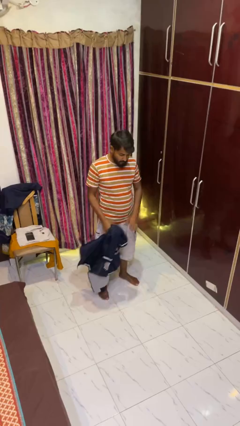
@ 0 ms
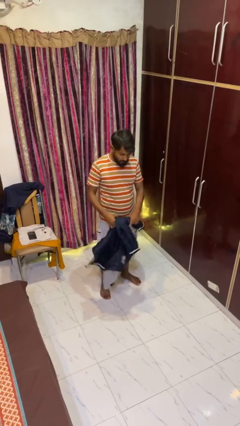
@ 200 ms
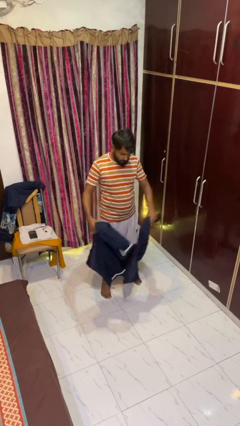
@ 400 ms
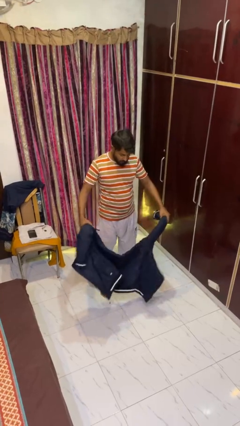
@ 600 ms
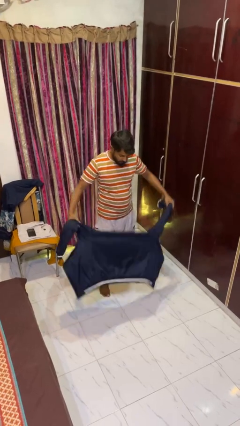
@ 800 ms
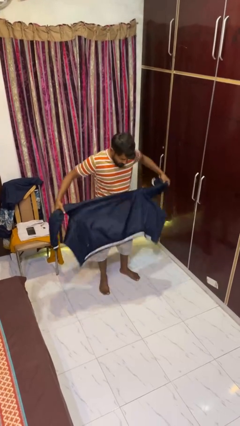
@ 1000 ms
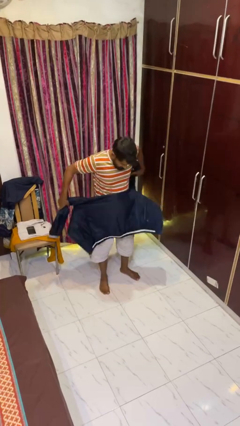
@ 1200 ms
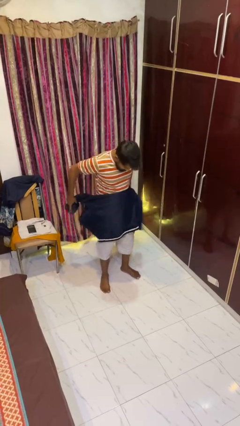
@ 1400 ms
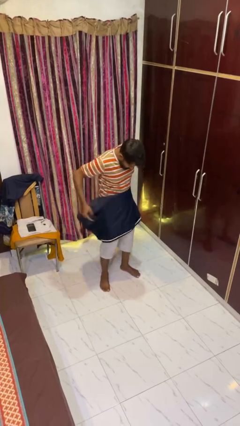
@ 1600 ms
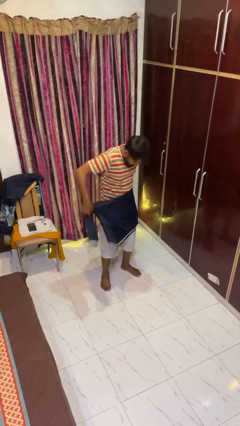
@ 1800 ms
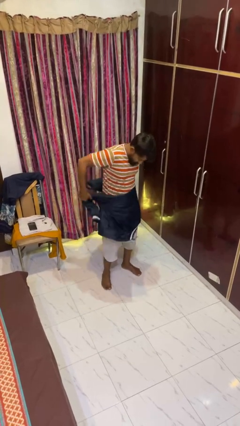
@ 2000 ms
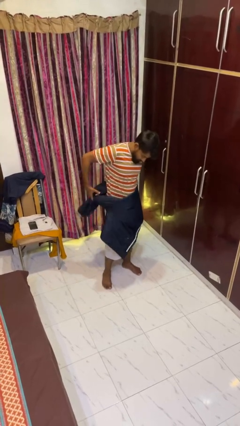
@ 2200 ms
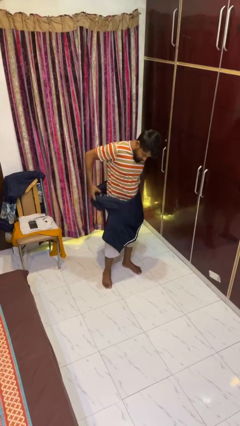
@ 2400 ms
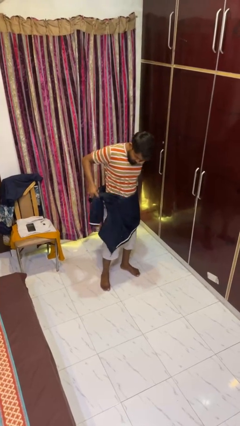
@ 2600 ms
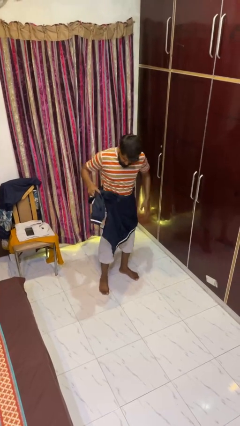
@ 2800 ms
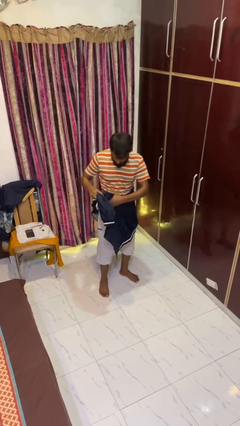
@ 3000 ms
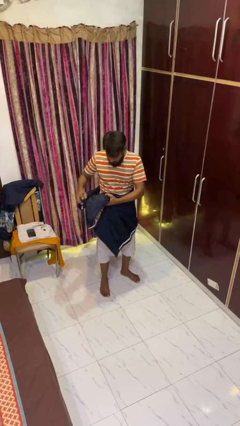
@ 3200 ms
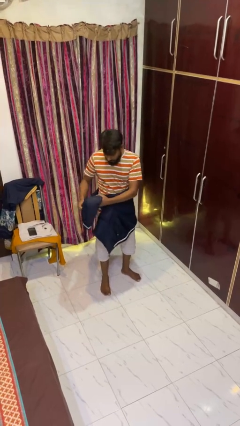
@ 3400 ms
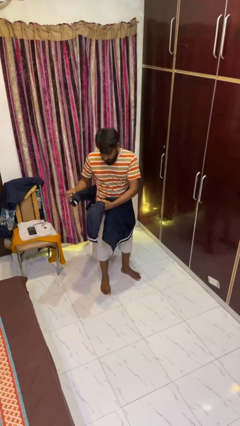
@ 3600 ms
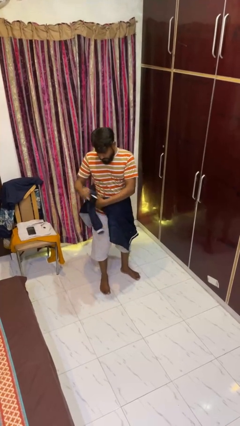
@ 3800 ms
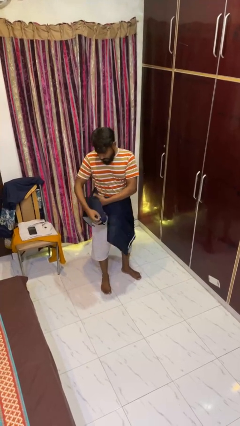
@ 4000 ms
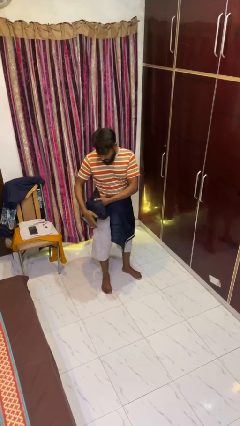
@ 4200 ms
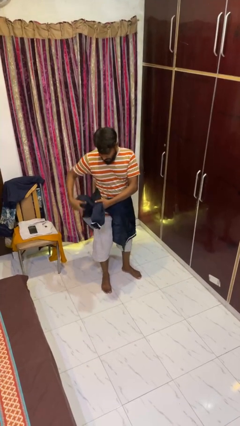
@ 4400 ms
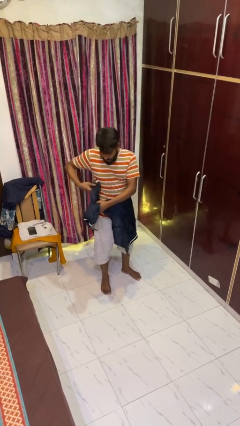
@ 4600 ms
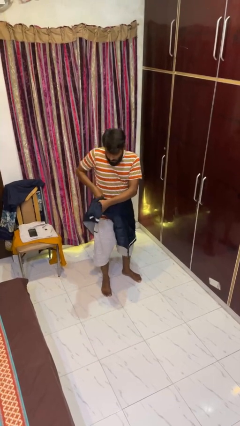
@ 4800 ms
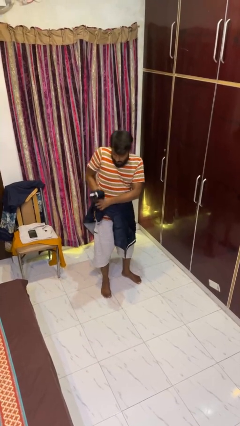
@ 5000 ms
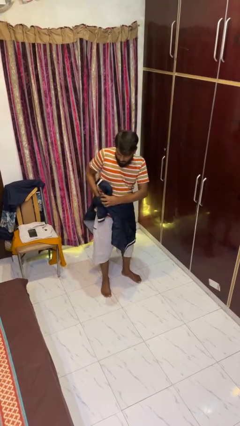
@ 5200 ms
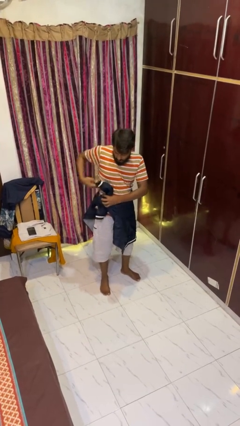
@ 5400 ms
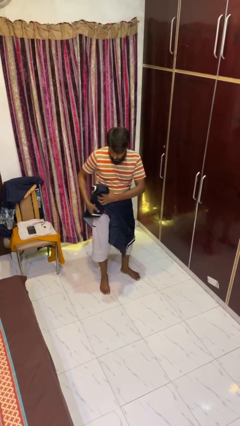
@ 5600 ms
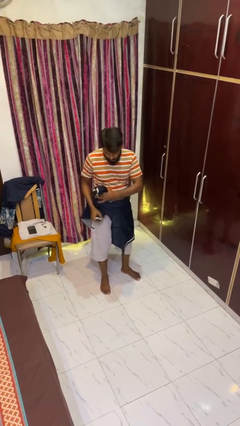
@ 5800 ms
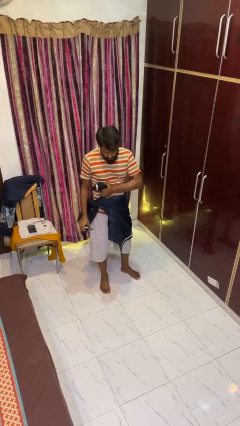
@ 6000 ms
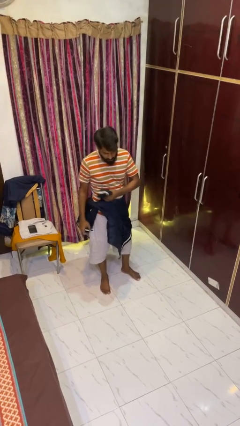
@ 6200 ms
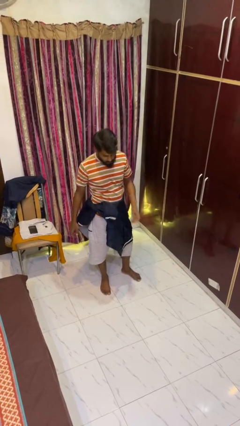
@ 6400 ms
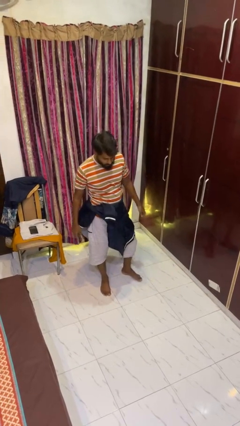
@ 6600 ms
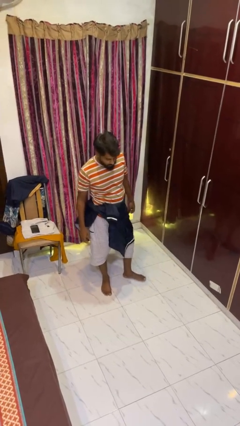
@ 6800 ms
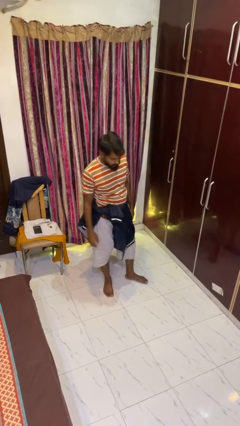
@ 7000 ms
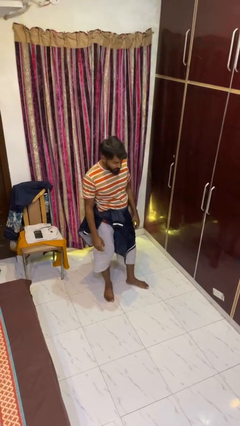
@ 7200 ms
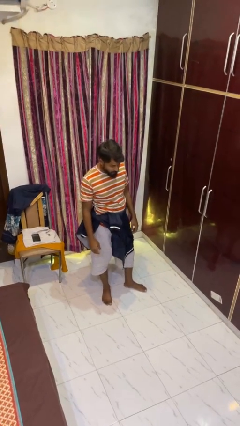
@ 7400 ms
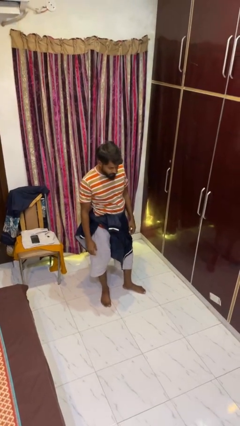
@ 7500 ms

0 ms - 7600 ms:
person ties jacket around waist

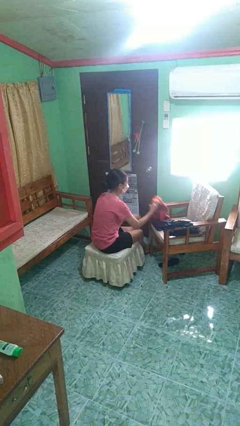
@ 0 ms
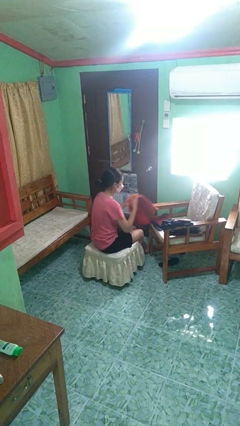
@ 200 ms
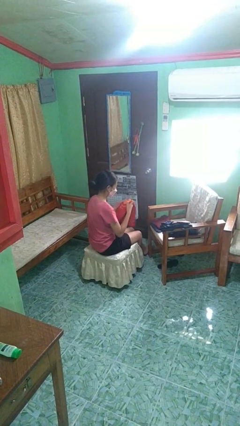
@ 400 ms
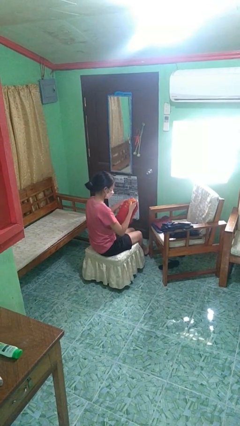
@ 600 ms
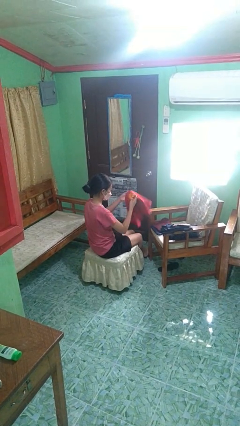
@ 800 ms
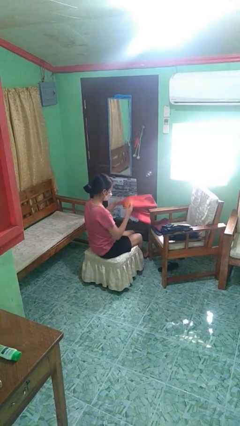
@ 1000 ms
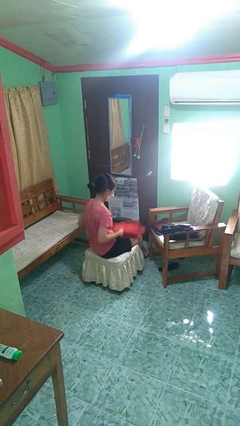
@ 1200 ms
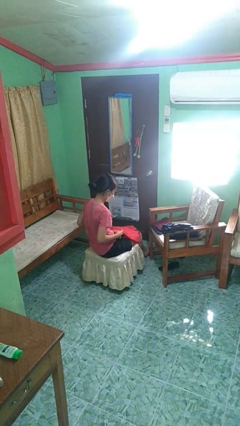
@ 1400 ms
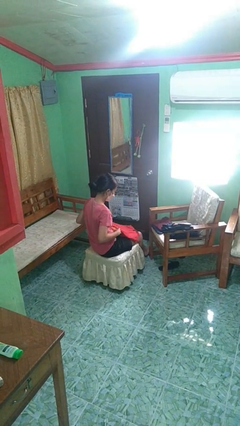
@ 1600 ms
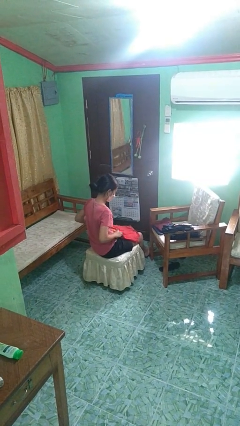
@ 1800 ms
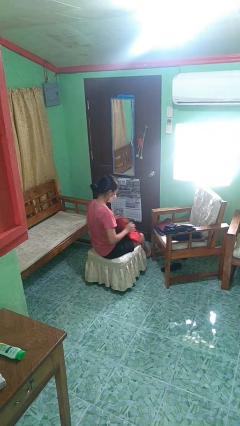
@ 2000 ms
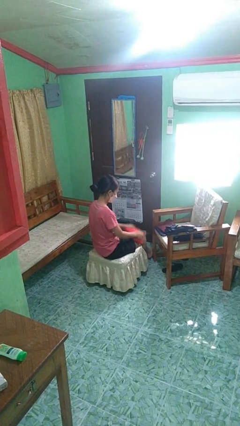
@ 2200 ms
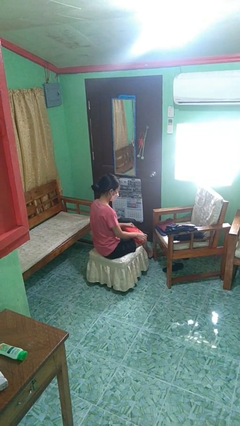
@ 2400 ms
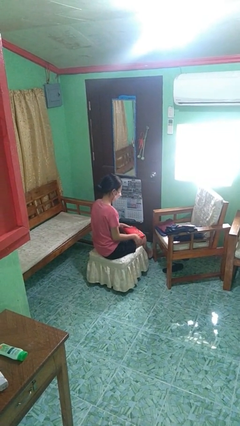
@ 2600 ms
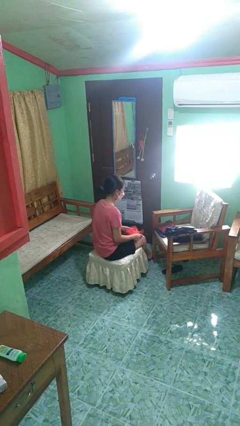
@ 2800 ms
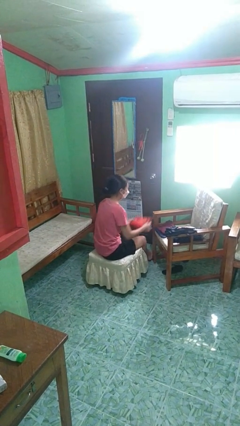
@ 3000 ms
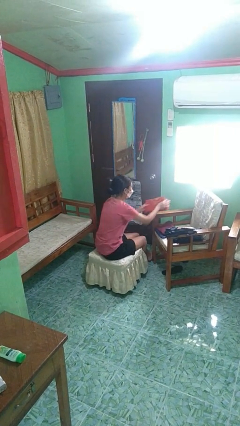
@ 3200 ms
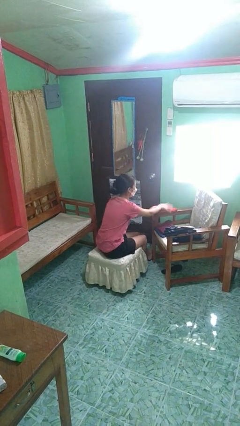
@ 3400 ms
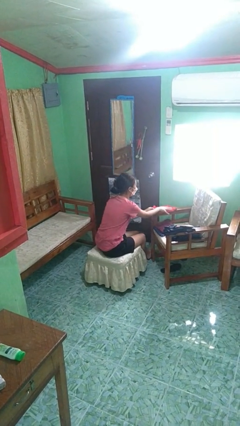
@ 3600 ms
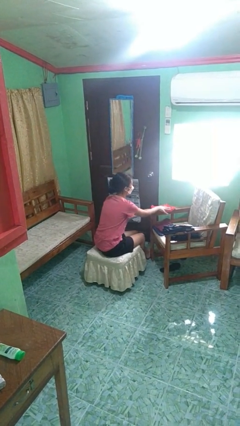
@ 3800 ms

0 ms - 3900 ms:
person folds shirt

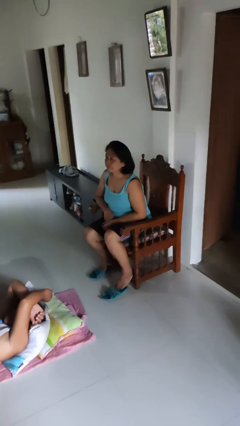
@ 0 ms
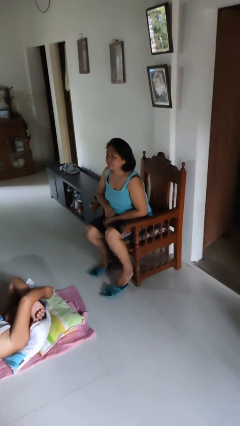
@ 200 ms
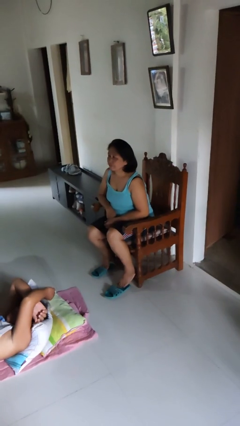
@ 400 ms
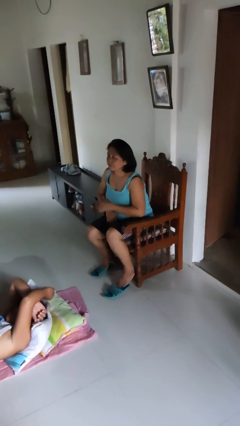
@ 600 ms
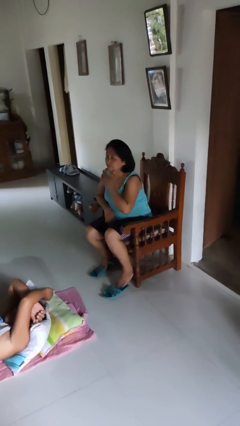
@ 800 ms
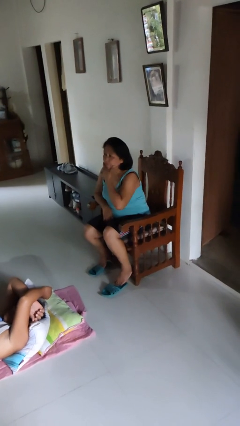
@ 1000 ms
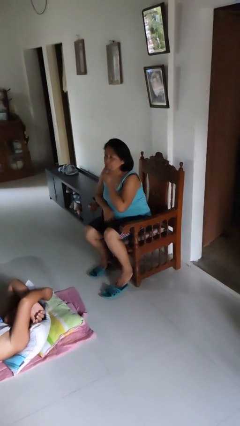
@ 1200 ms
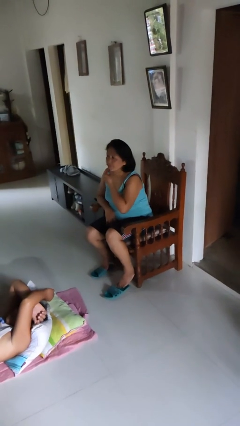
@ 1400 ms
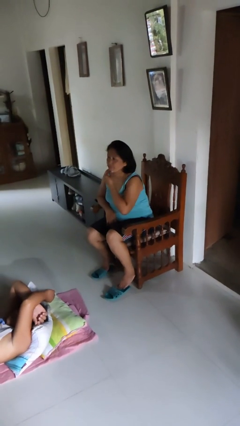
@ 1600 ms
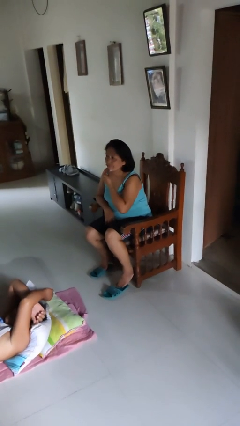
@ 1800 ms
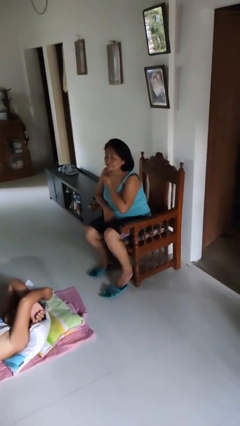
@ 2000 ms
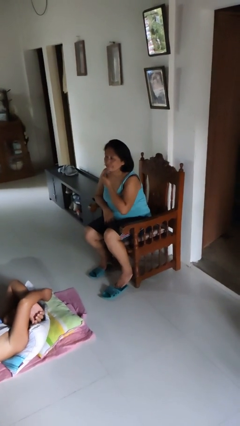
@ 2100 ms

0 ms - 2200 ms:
person strokes chin

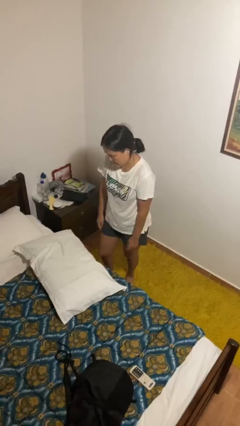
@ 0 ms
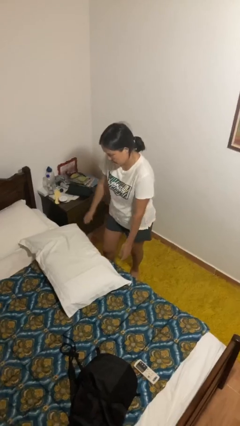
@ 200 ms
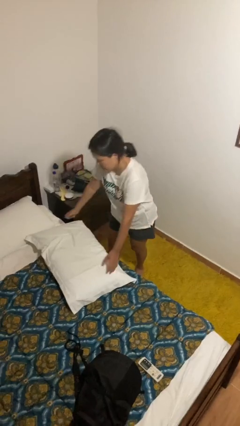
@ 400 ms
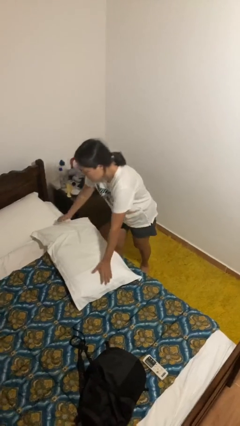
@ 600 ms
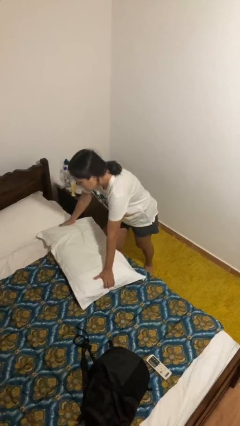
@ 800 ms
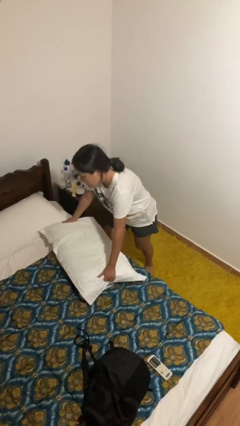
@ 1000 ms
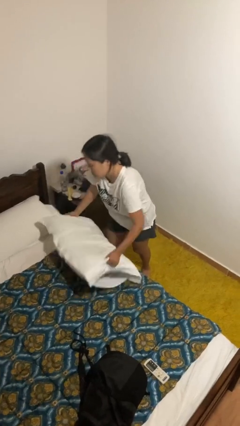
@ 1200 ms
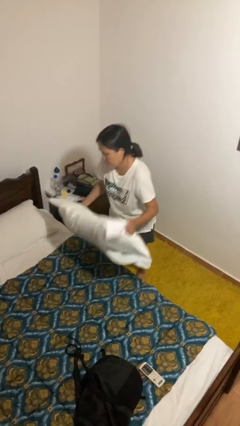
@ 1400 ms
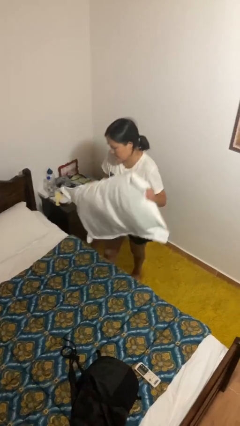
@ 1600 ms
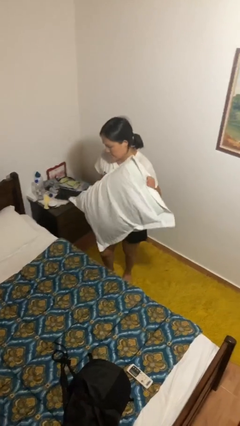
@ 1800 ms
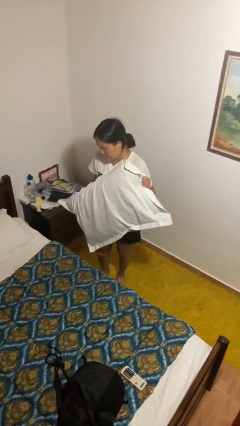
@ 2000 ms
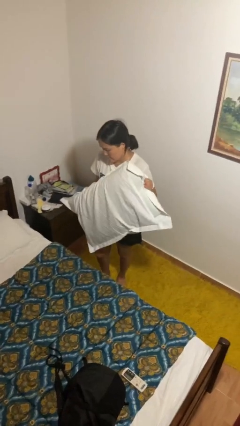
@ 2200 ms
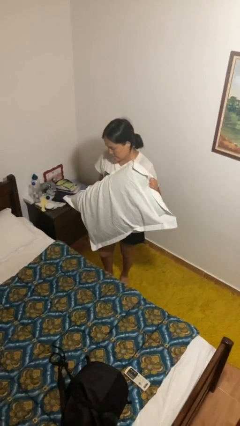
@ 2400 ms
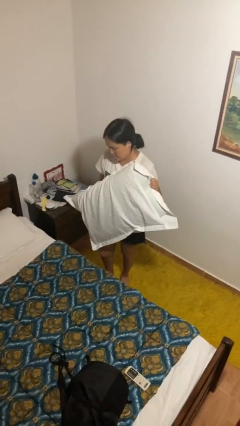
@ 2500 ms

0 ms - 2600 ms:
person picks up object from bed

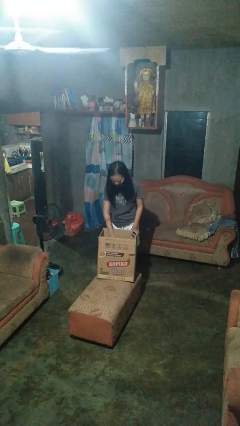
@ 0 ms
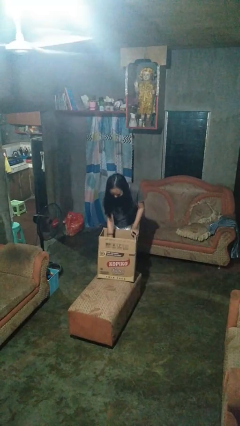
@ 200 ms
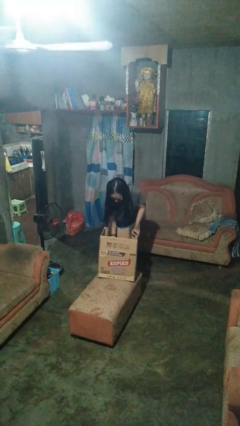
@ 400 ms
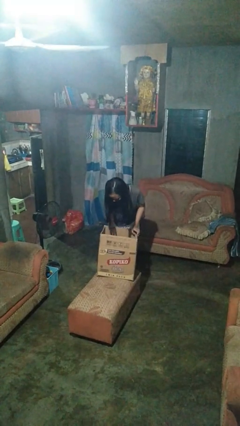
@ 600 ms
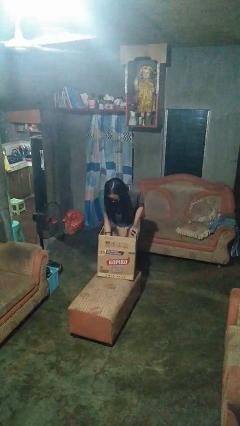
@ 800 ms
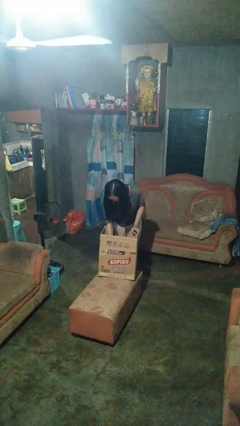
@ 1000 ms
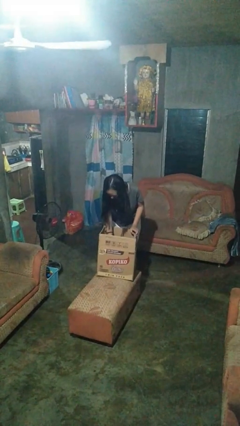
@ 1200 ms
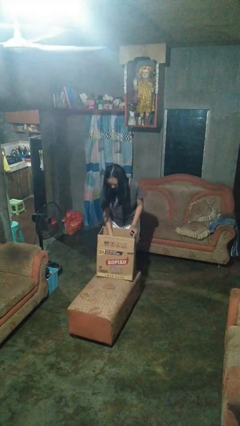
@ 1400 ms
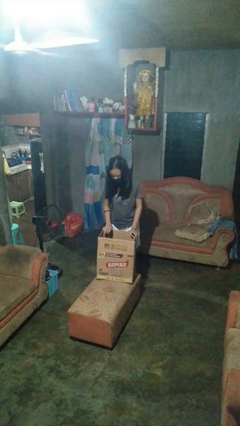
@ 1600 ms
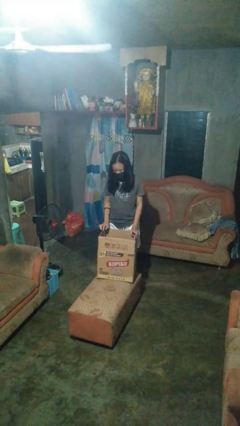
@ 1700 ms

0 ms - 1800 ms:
person searches in box
